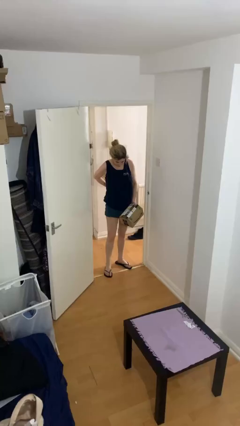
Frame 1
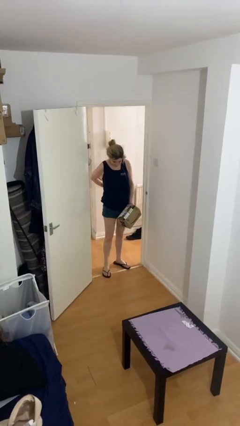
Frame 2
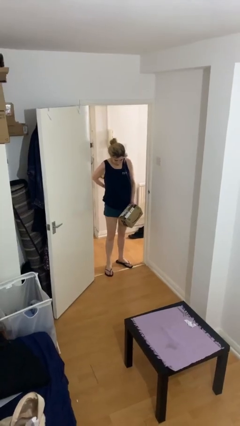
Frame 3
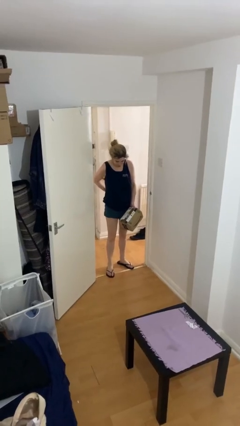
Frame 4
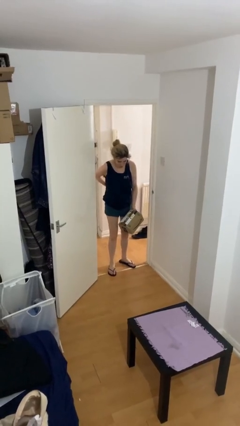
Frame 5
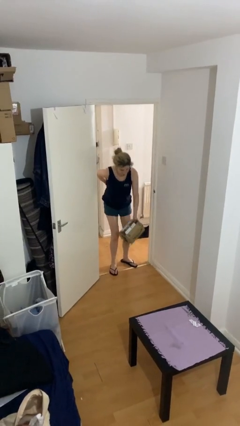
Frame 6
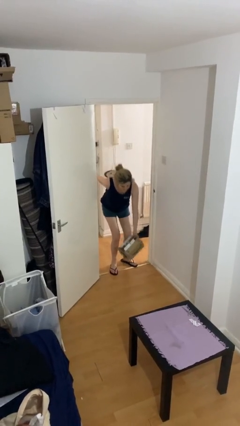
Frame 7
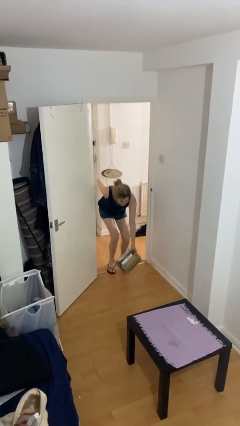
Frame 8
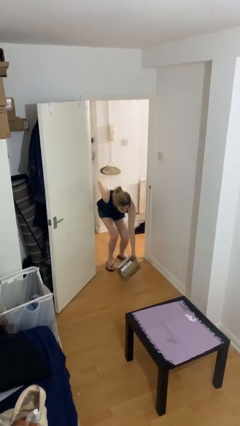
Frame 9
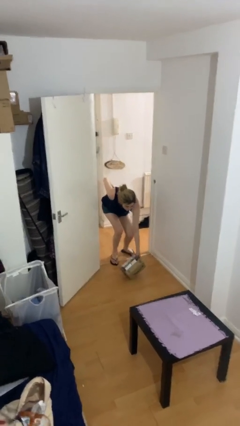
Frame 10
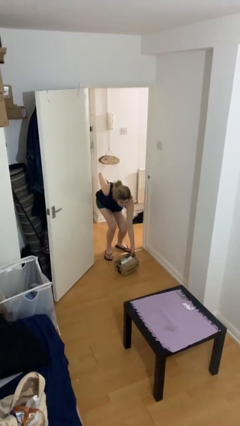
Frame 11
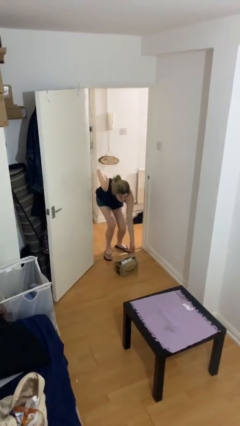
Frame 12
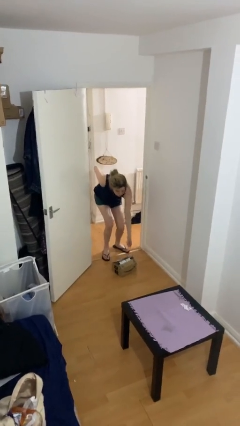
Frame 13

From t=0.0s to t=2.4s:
person puts down object on floor

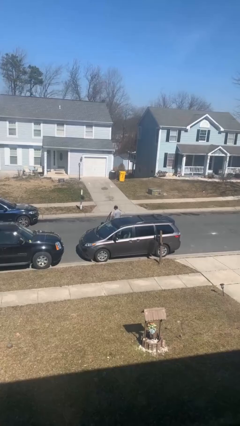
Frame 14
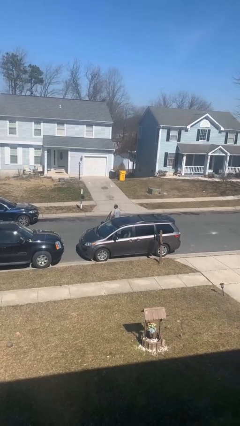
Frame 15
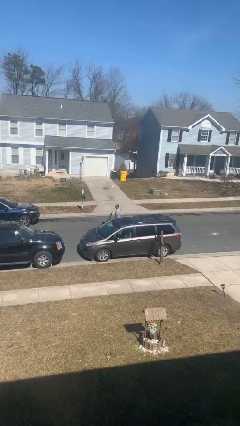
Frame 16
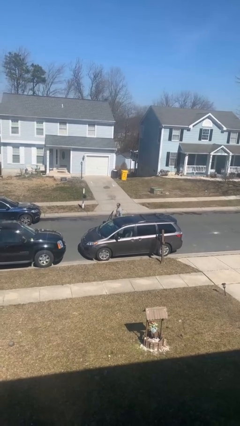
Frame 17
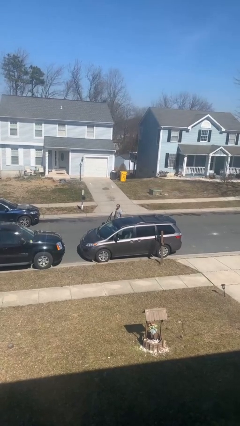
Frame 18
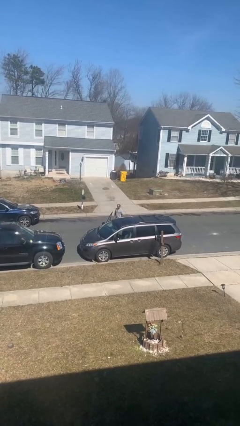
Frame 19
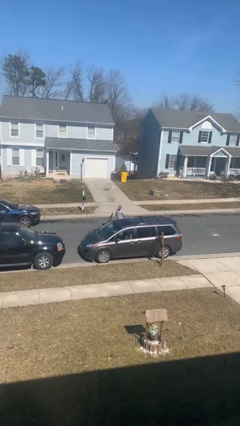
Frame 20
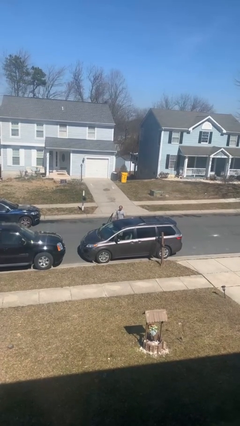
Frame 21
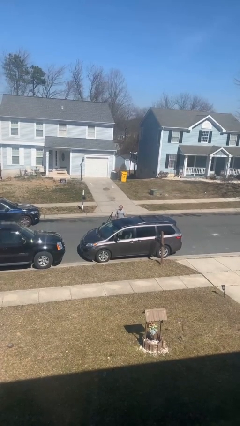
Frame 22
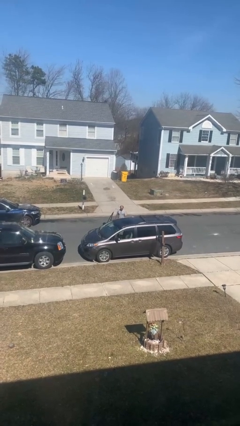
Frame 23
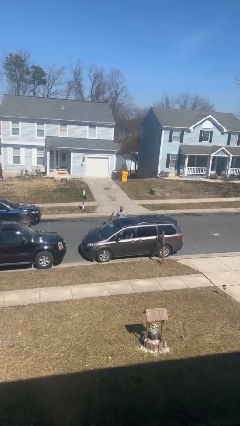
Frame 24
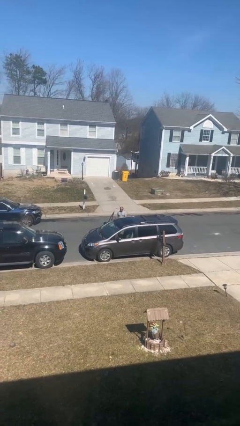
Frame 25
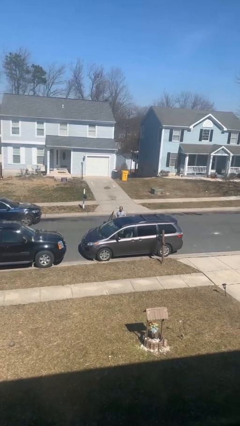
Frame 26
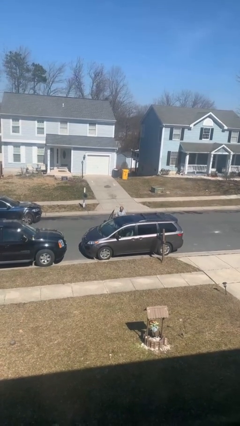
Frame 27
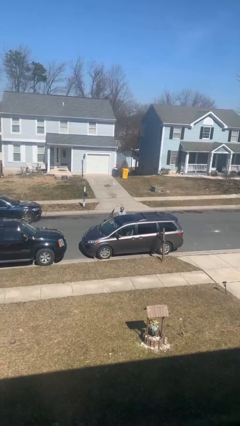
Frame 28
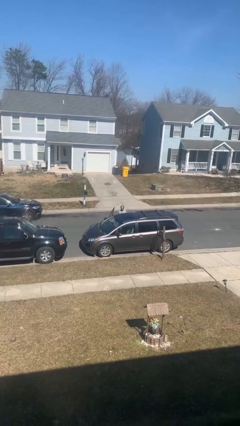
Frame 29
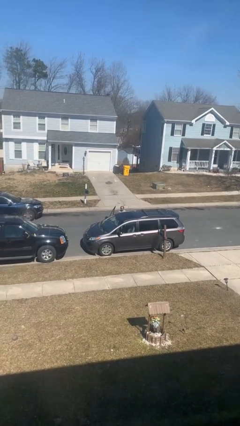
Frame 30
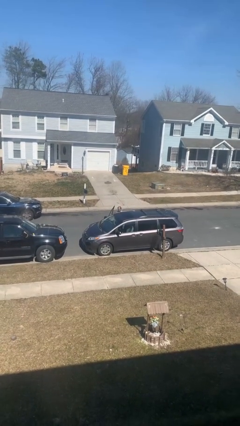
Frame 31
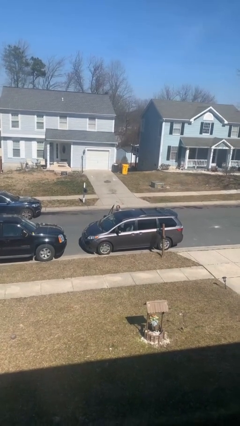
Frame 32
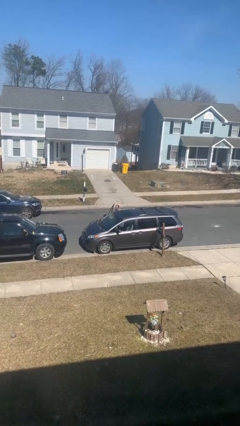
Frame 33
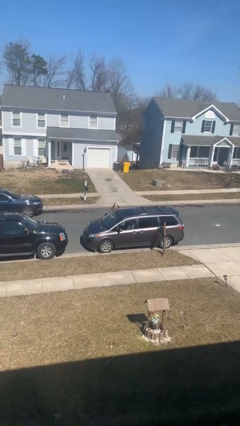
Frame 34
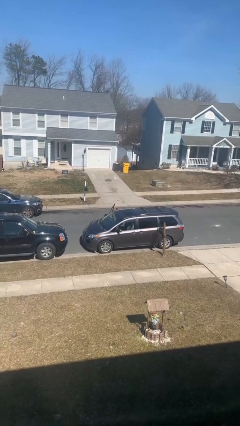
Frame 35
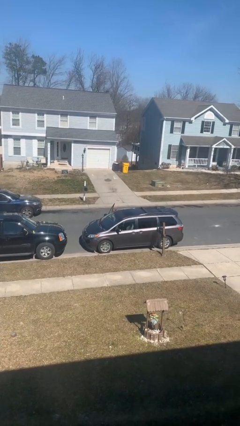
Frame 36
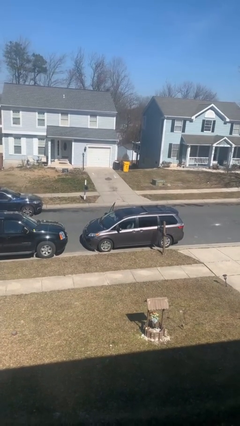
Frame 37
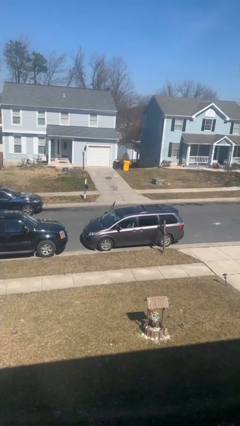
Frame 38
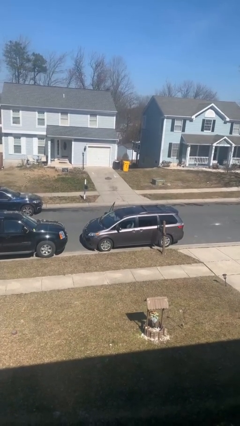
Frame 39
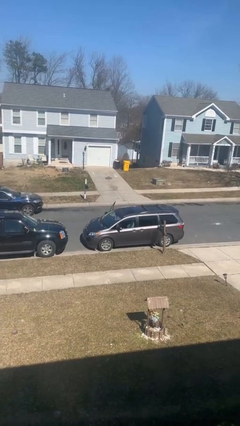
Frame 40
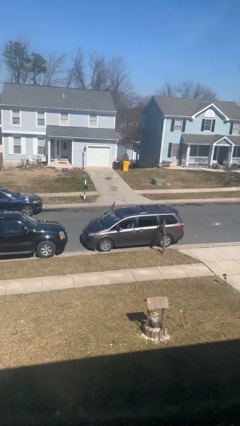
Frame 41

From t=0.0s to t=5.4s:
person enters car

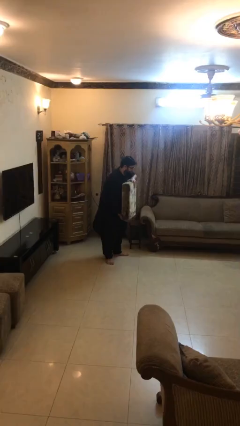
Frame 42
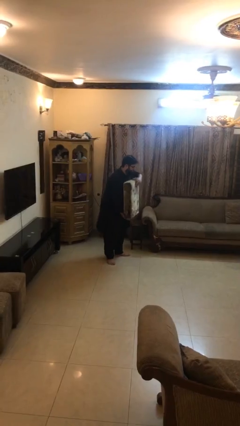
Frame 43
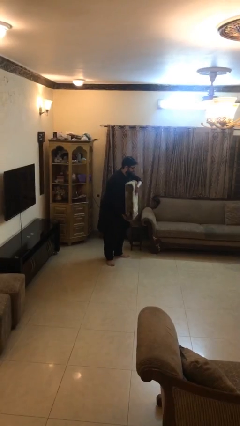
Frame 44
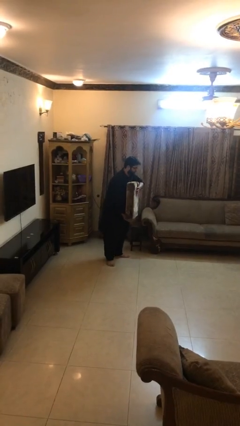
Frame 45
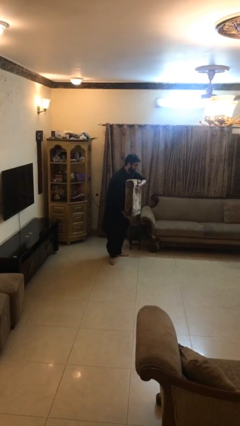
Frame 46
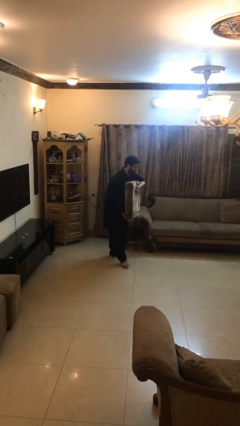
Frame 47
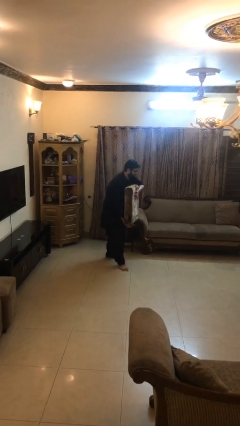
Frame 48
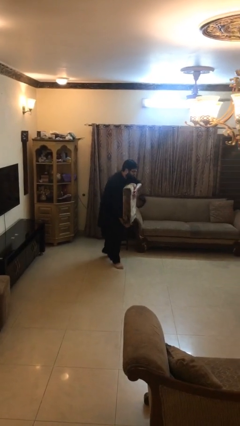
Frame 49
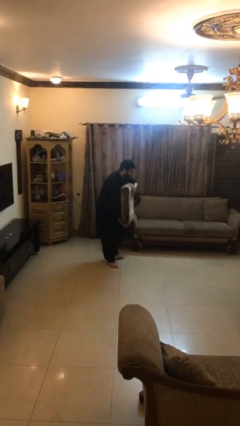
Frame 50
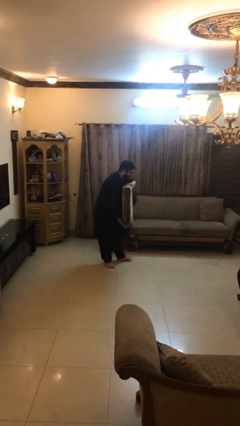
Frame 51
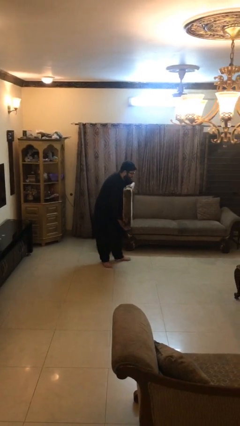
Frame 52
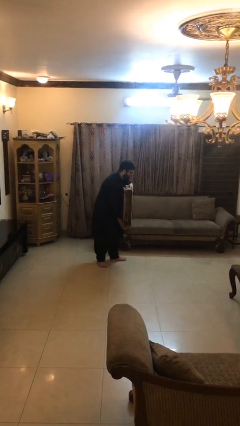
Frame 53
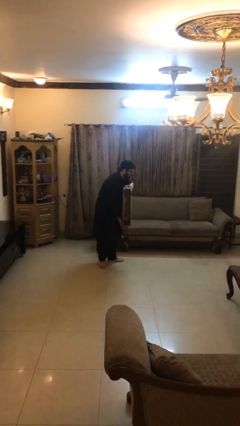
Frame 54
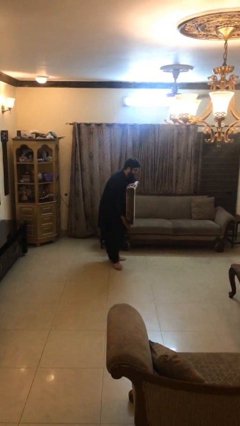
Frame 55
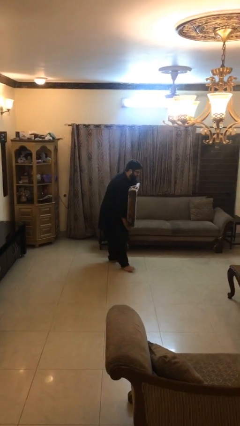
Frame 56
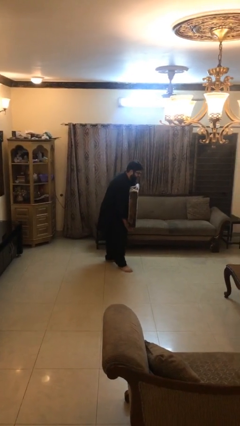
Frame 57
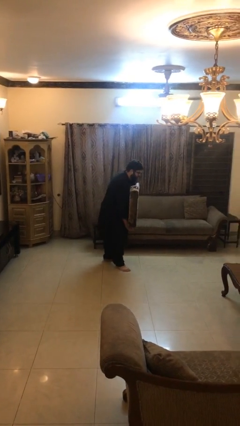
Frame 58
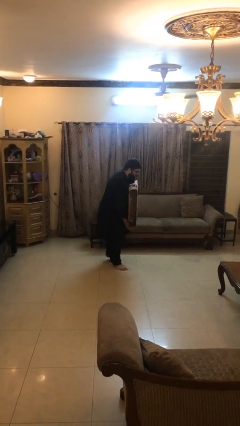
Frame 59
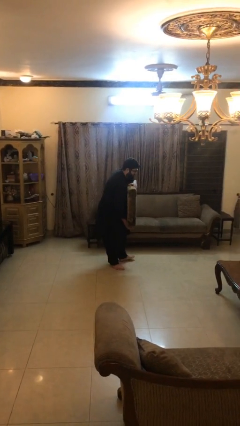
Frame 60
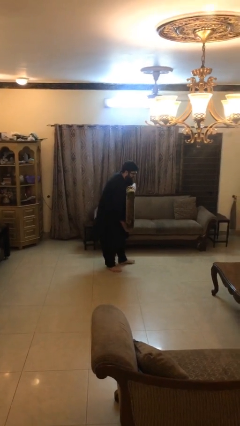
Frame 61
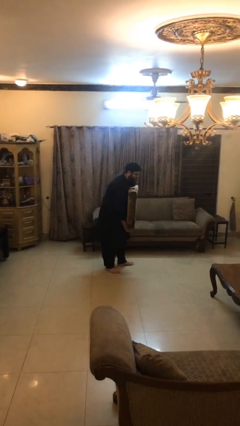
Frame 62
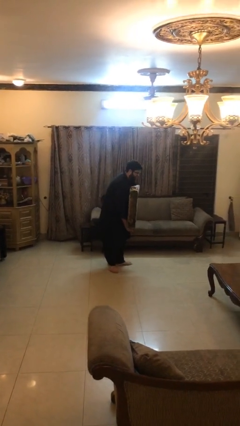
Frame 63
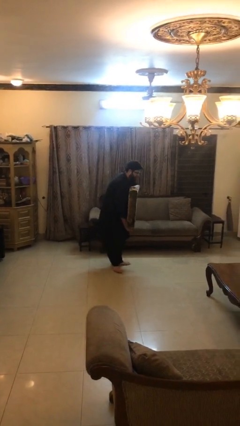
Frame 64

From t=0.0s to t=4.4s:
person carries heavy object

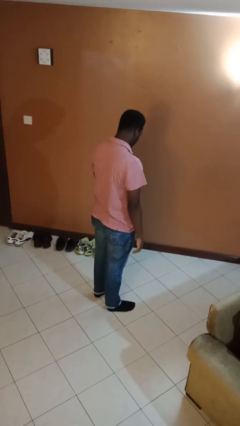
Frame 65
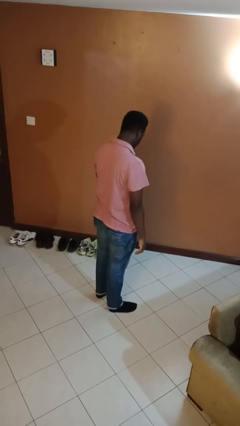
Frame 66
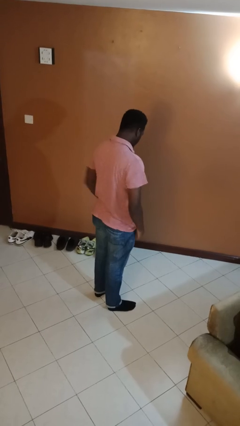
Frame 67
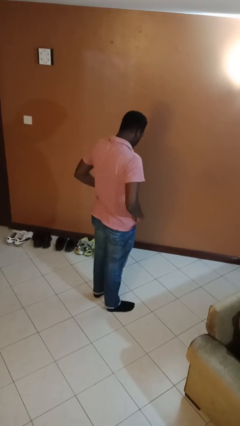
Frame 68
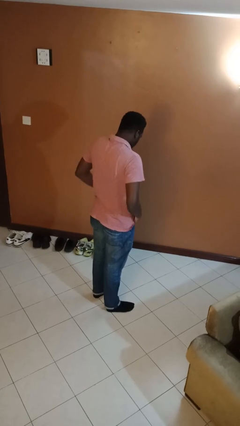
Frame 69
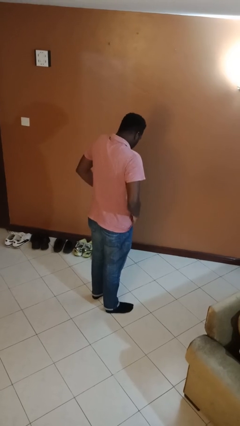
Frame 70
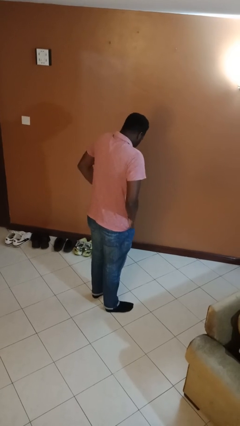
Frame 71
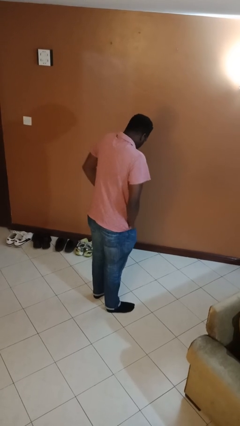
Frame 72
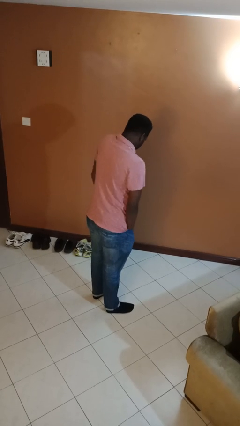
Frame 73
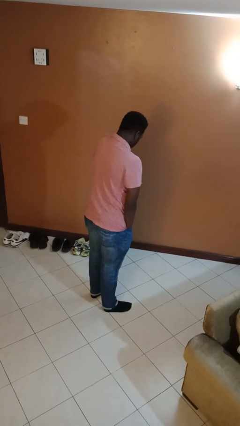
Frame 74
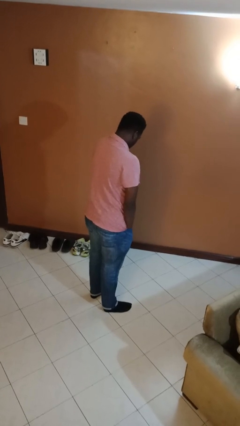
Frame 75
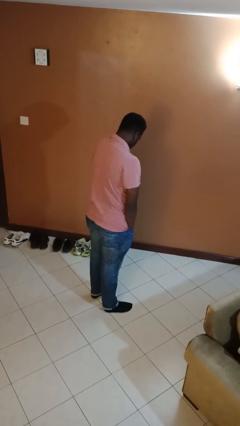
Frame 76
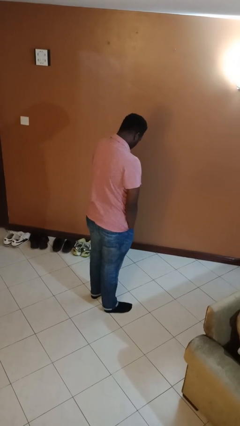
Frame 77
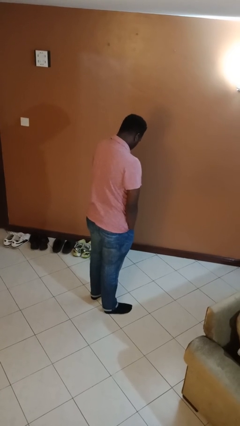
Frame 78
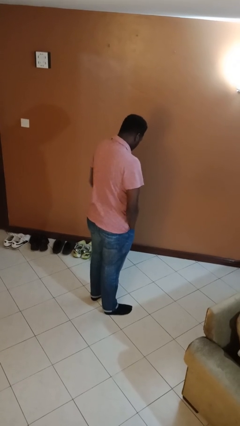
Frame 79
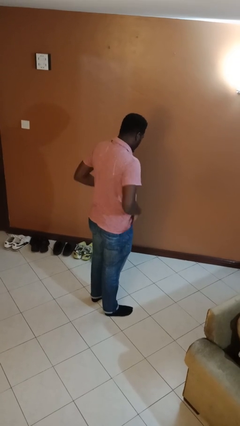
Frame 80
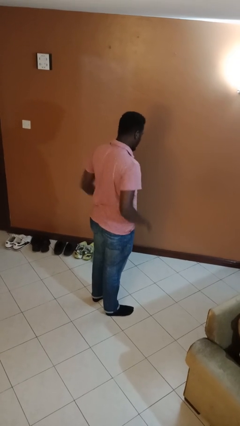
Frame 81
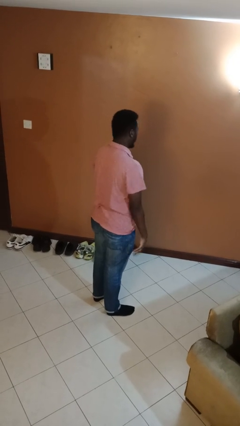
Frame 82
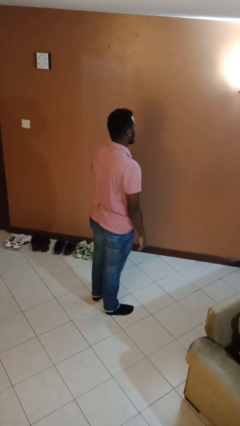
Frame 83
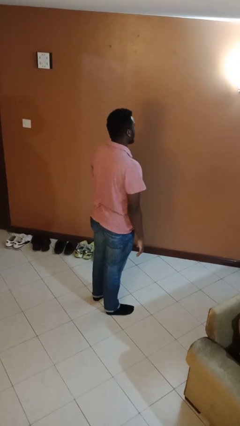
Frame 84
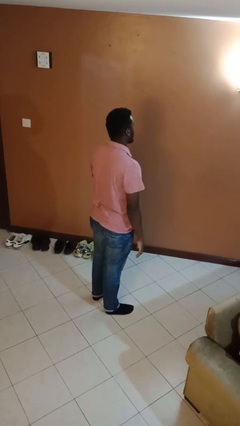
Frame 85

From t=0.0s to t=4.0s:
person puts hands in back pockets

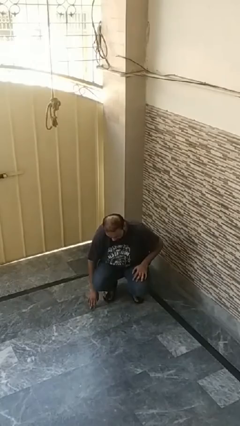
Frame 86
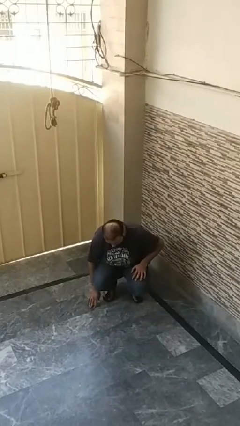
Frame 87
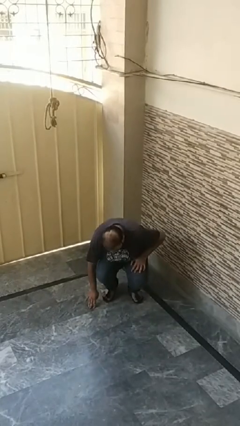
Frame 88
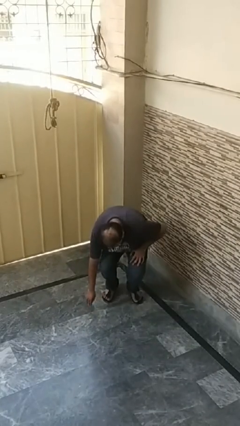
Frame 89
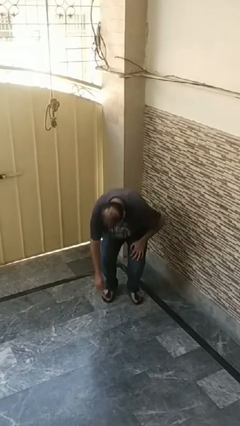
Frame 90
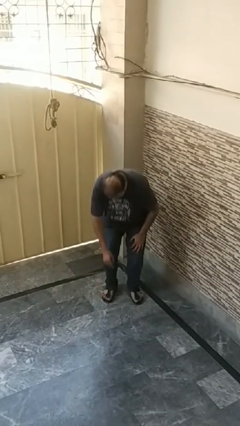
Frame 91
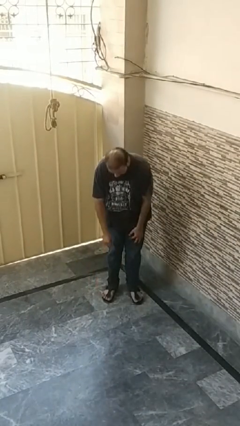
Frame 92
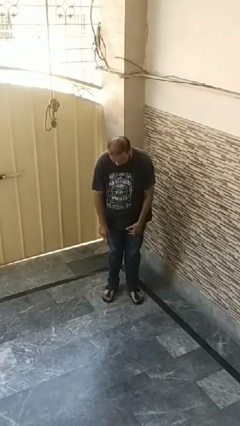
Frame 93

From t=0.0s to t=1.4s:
person stands up from floor

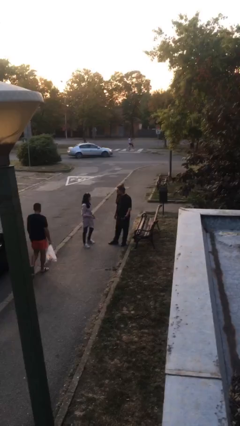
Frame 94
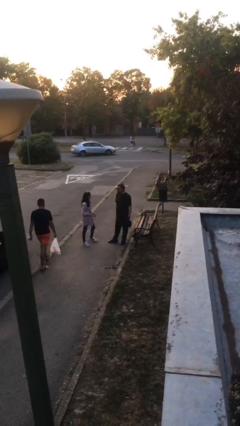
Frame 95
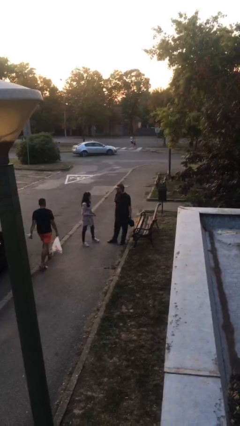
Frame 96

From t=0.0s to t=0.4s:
person embraces person
